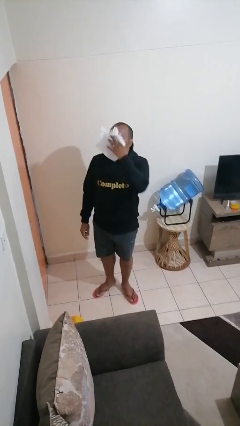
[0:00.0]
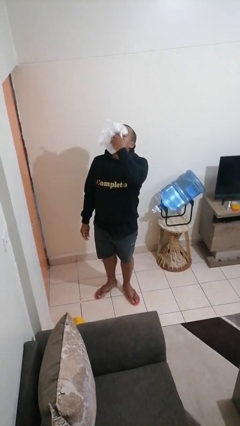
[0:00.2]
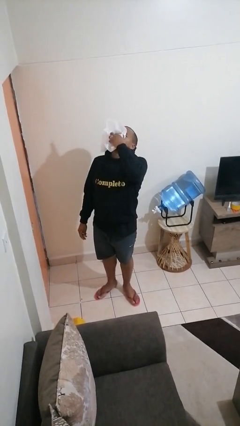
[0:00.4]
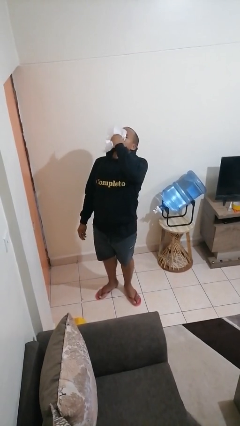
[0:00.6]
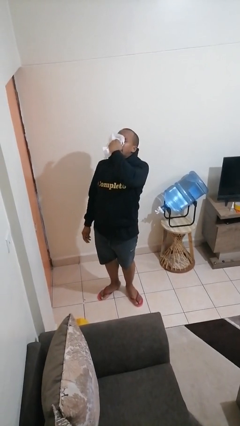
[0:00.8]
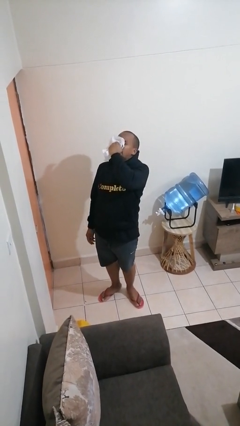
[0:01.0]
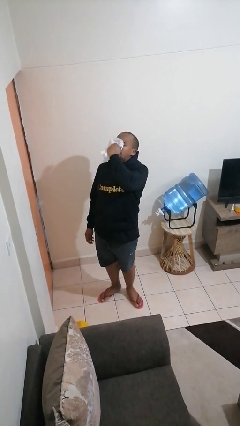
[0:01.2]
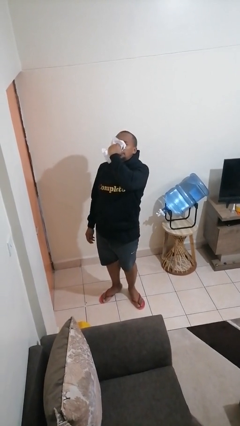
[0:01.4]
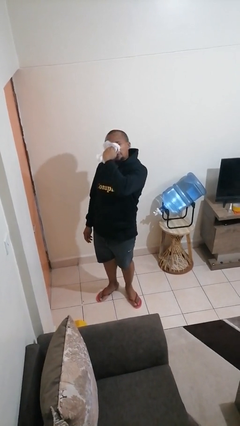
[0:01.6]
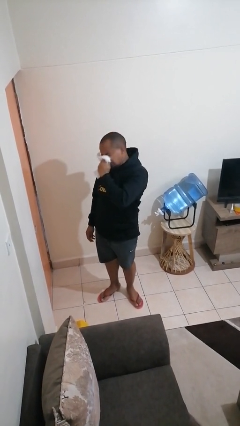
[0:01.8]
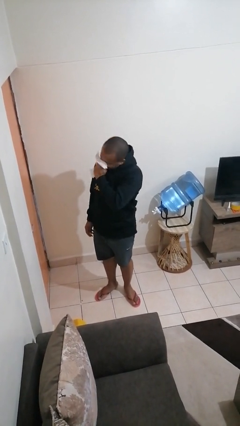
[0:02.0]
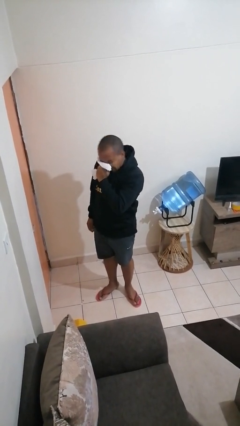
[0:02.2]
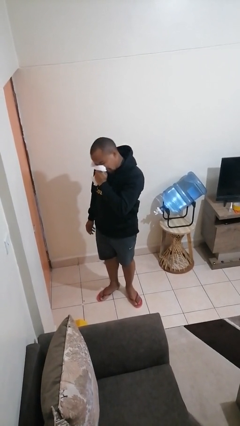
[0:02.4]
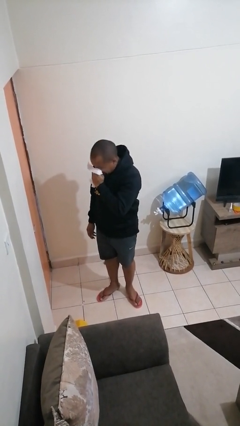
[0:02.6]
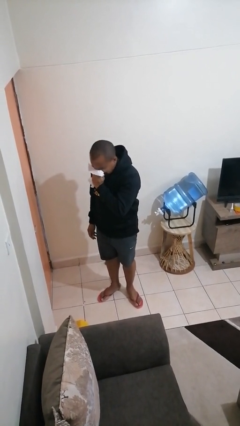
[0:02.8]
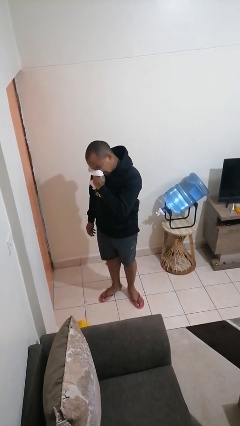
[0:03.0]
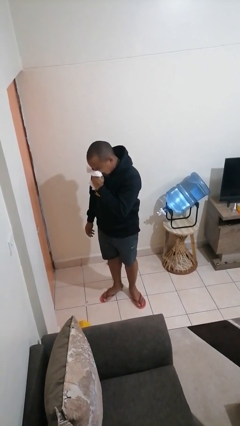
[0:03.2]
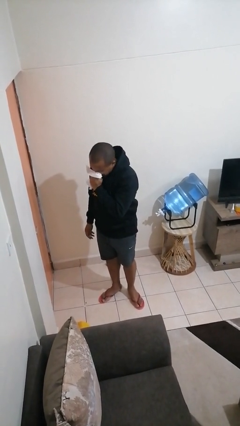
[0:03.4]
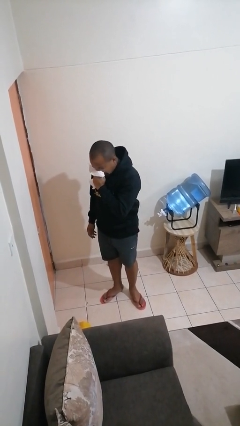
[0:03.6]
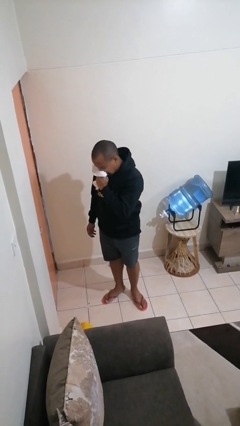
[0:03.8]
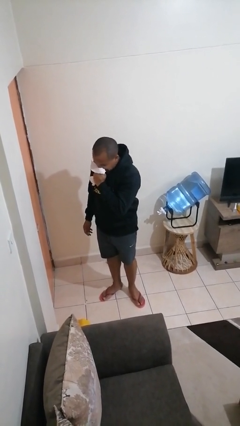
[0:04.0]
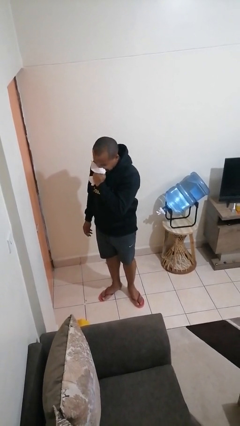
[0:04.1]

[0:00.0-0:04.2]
person blows nose

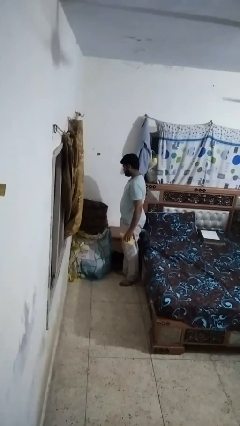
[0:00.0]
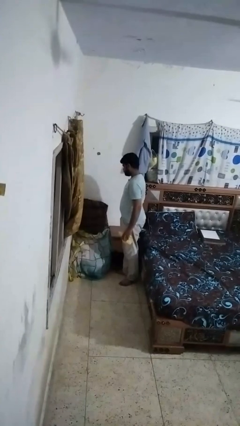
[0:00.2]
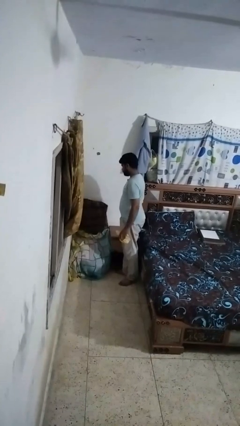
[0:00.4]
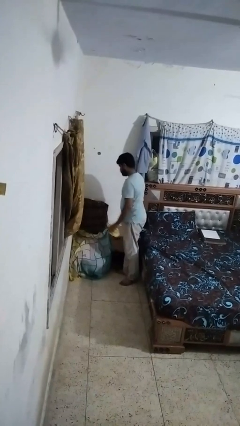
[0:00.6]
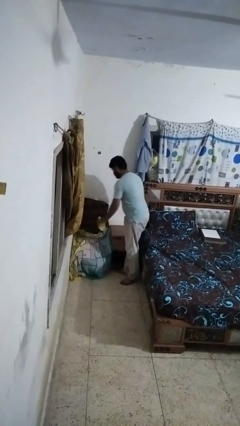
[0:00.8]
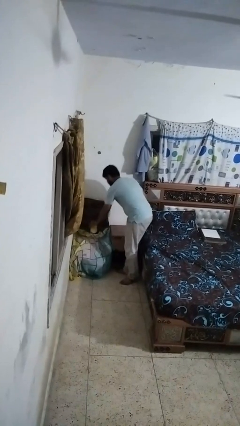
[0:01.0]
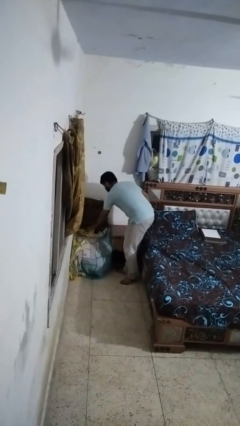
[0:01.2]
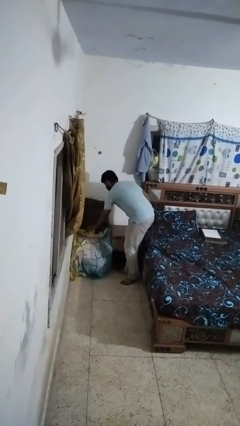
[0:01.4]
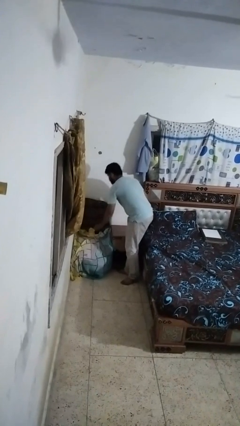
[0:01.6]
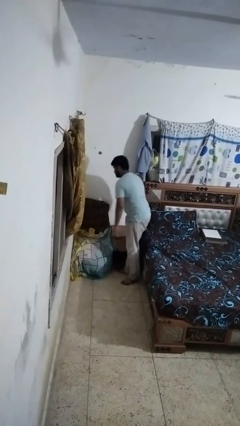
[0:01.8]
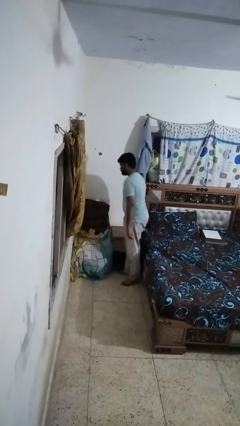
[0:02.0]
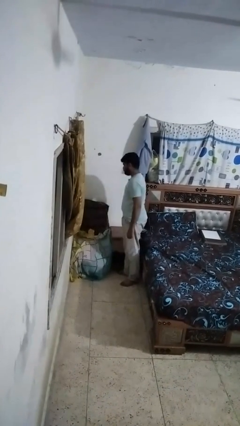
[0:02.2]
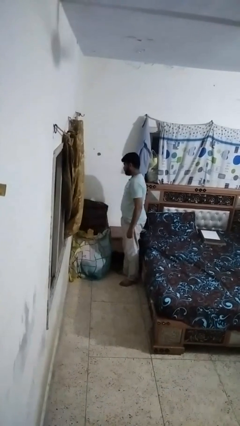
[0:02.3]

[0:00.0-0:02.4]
person puts down object on couch

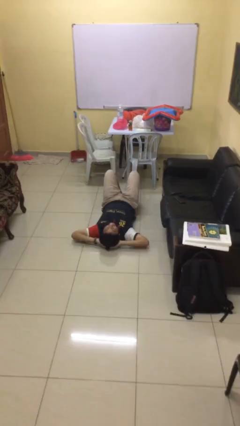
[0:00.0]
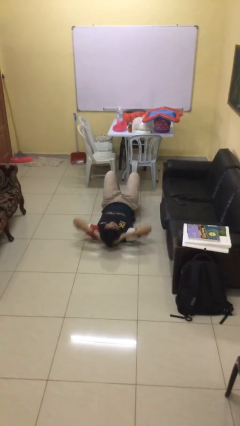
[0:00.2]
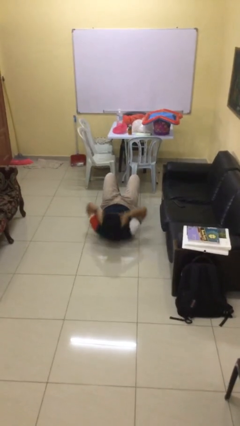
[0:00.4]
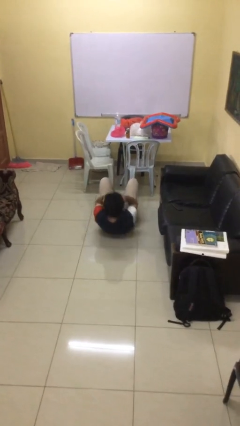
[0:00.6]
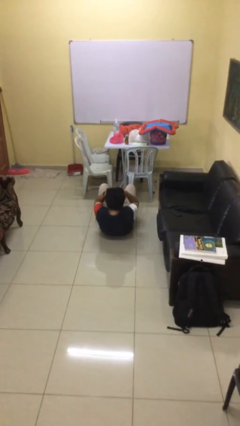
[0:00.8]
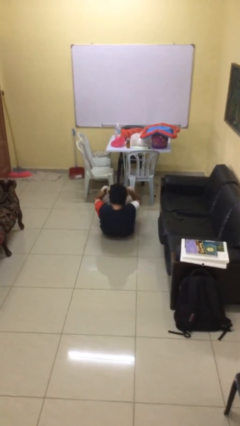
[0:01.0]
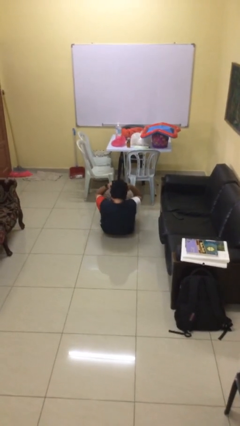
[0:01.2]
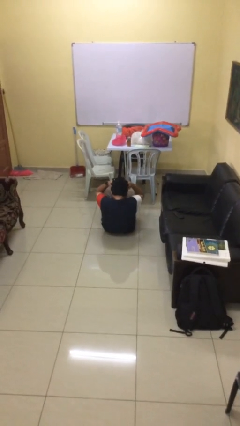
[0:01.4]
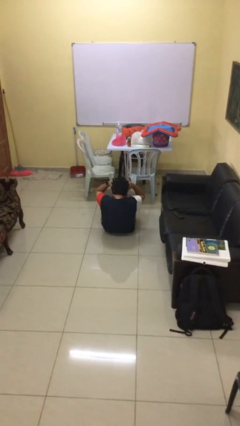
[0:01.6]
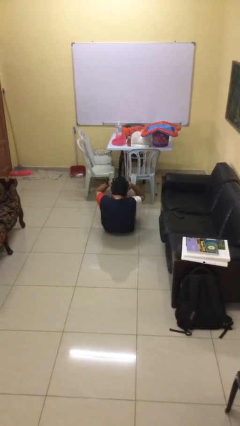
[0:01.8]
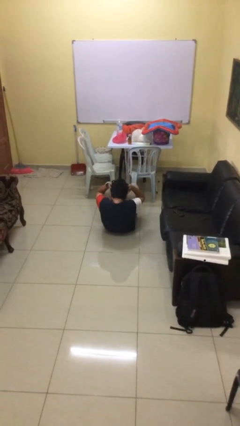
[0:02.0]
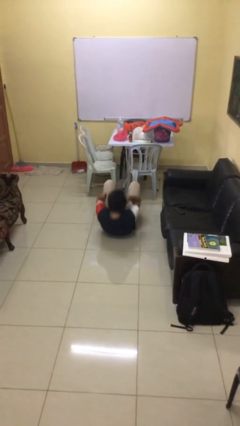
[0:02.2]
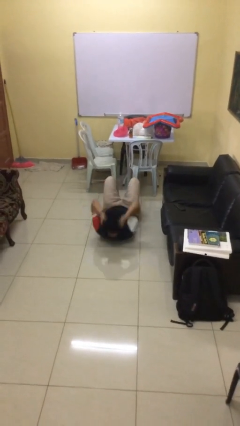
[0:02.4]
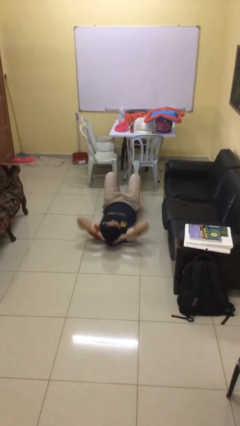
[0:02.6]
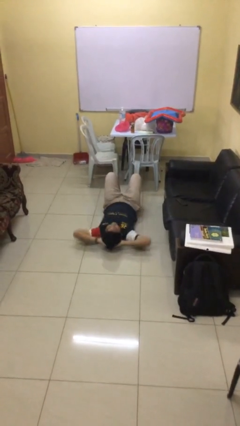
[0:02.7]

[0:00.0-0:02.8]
person exercises with situp

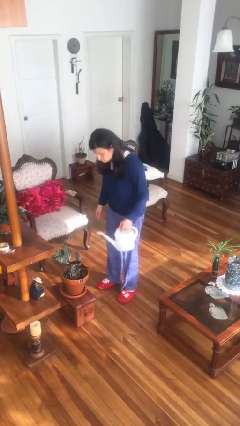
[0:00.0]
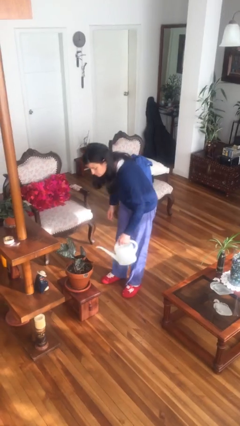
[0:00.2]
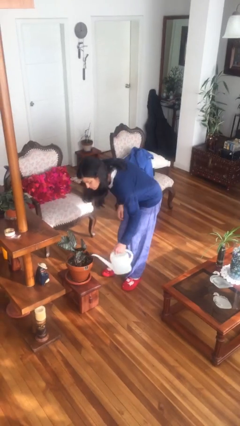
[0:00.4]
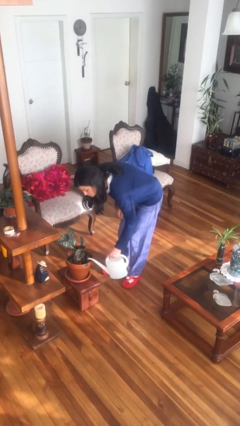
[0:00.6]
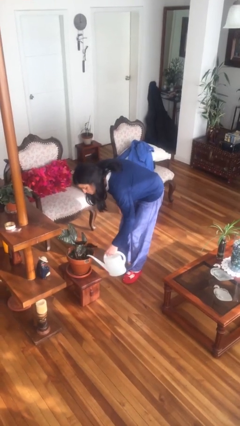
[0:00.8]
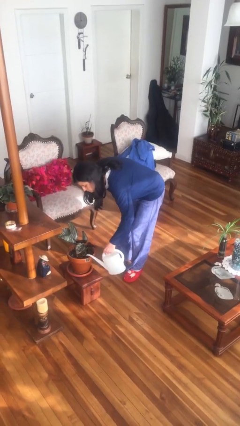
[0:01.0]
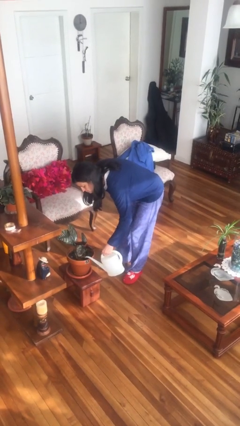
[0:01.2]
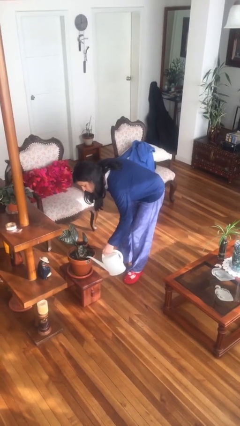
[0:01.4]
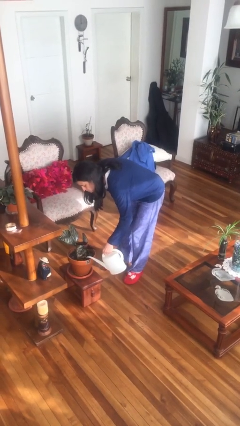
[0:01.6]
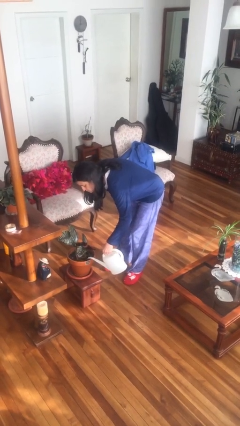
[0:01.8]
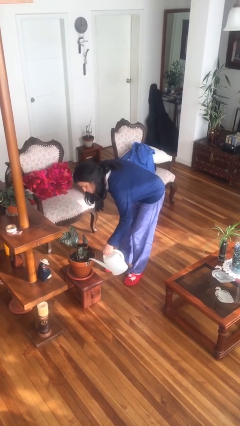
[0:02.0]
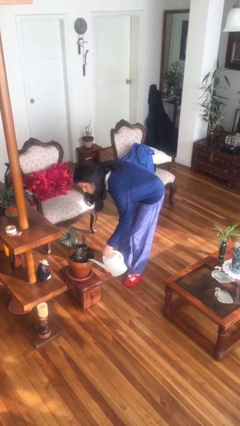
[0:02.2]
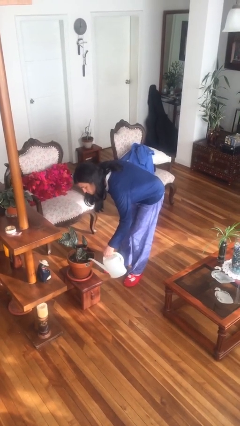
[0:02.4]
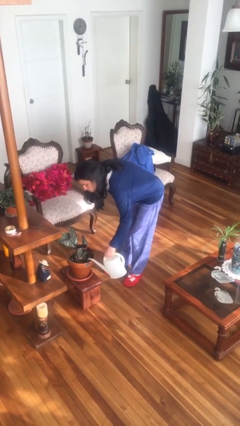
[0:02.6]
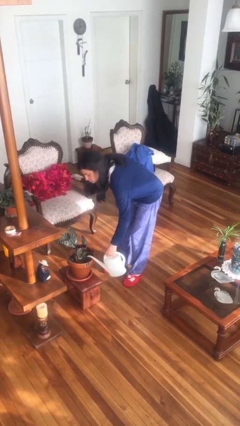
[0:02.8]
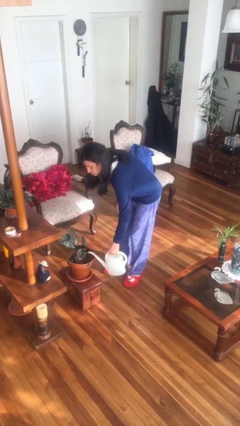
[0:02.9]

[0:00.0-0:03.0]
person waters houseplant

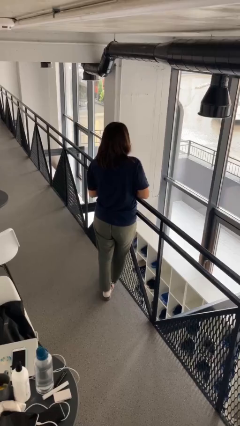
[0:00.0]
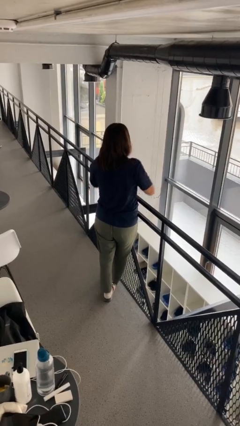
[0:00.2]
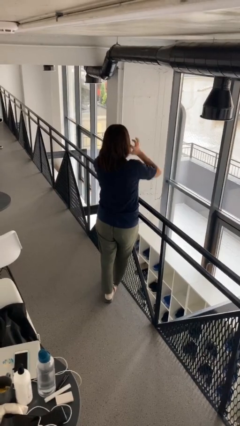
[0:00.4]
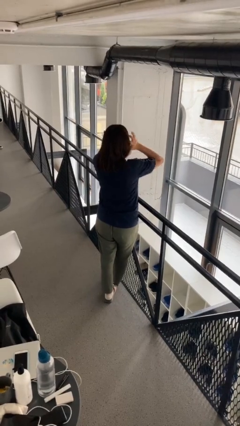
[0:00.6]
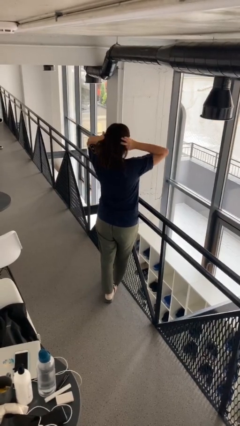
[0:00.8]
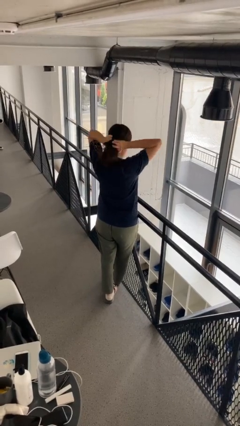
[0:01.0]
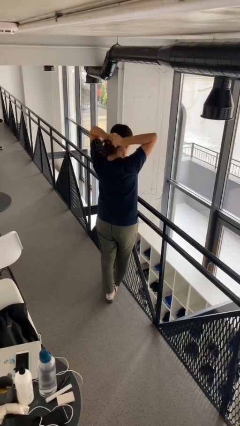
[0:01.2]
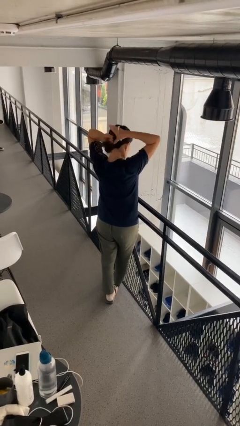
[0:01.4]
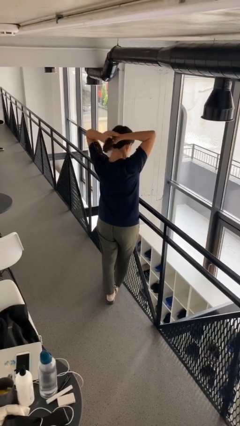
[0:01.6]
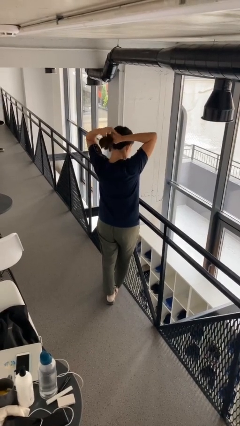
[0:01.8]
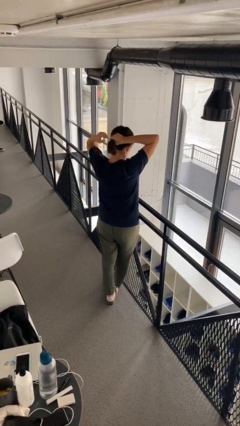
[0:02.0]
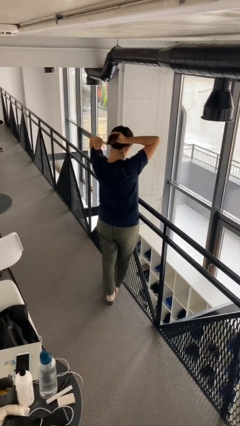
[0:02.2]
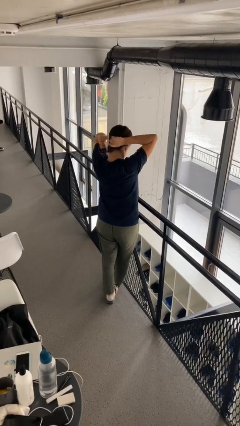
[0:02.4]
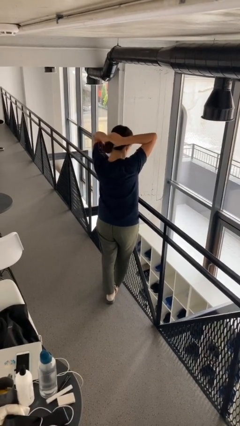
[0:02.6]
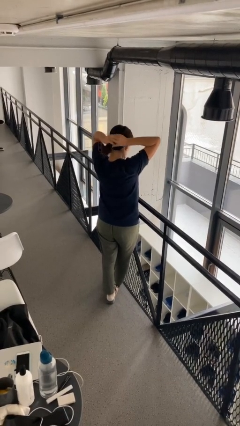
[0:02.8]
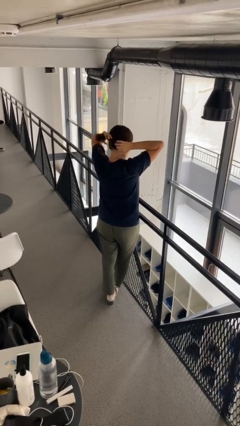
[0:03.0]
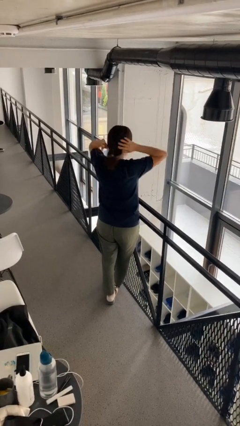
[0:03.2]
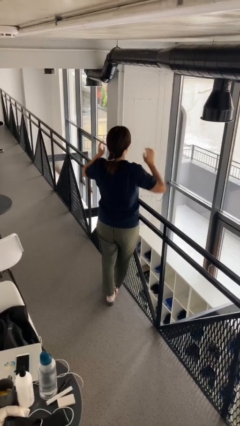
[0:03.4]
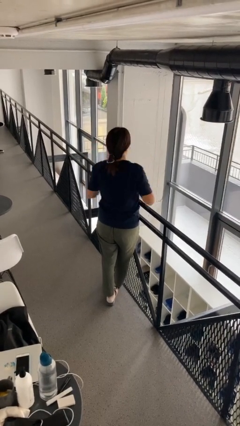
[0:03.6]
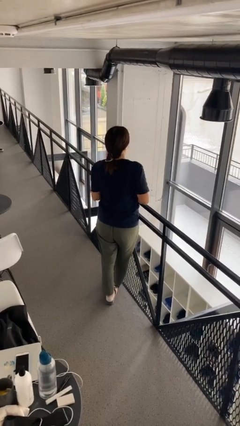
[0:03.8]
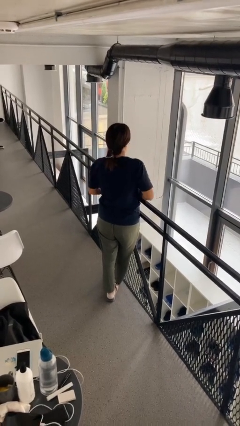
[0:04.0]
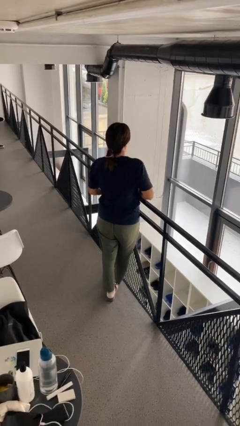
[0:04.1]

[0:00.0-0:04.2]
person puts hair in ponytail

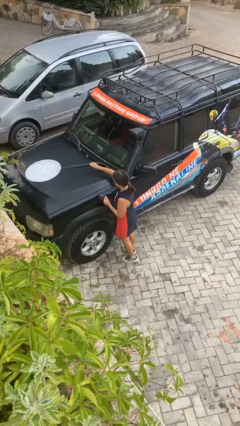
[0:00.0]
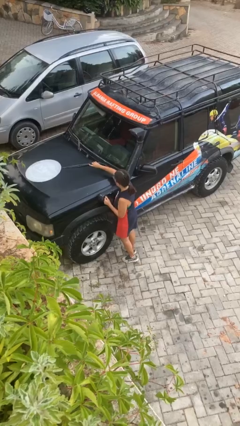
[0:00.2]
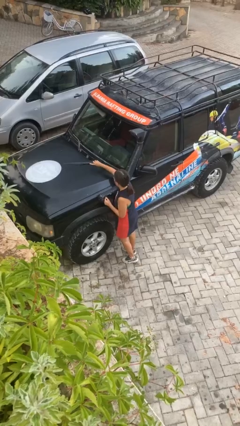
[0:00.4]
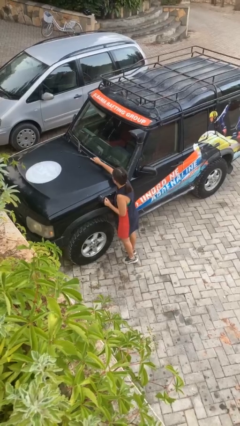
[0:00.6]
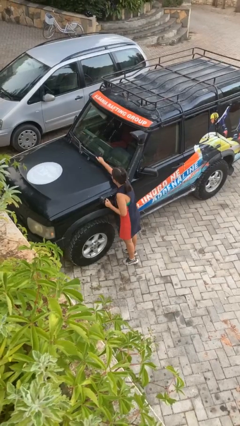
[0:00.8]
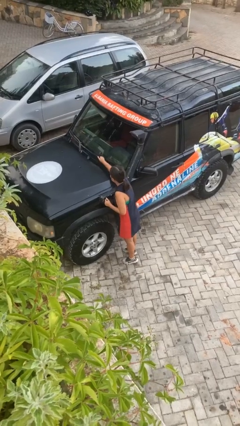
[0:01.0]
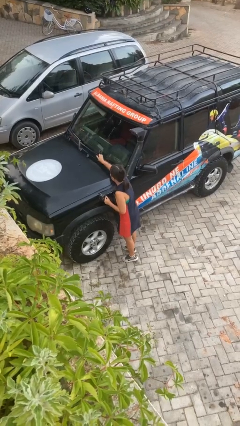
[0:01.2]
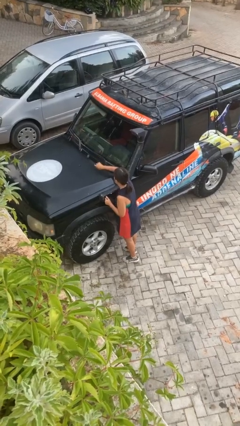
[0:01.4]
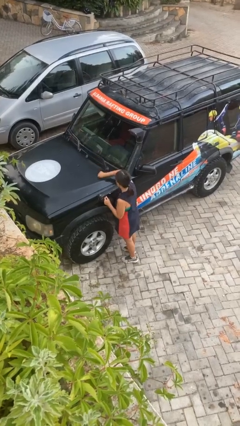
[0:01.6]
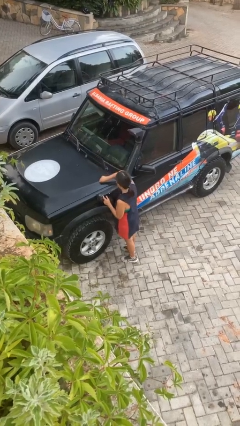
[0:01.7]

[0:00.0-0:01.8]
person flips down car wipers
